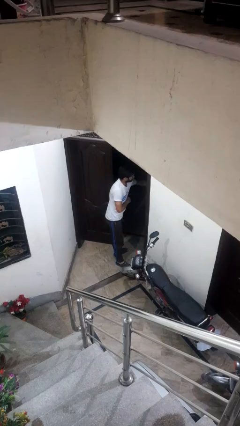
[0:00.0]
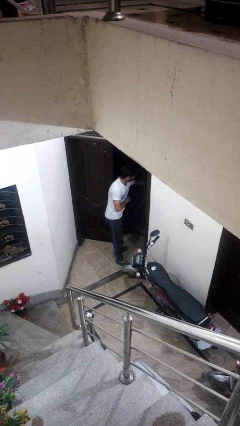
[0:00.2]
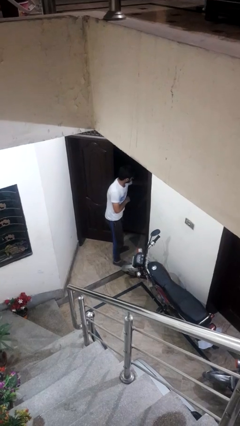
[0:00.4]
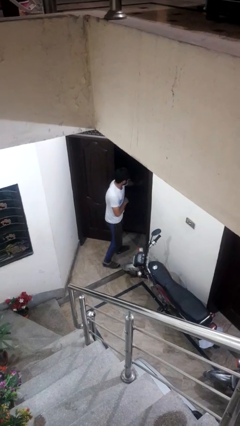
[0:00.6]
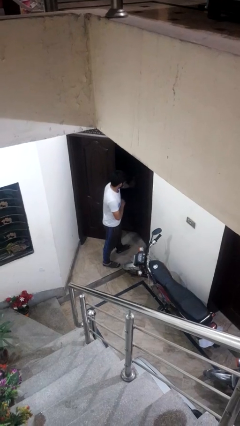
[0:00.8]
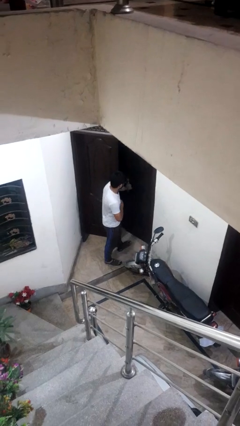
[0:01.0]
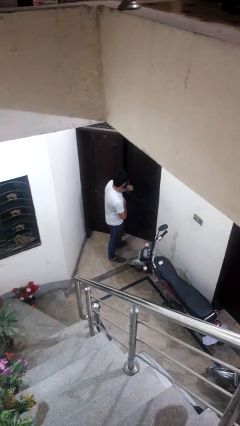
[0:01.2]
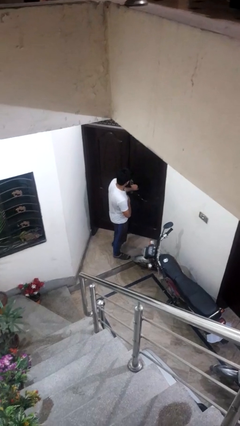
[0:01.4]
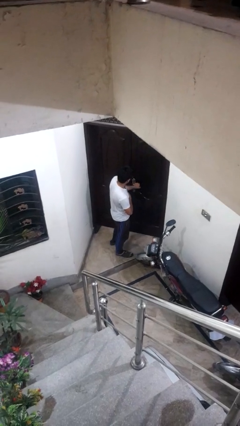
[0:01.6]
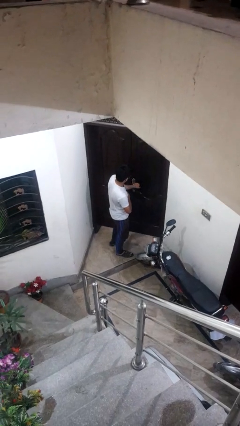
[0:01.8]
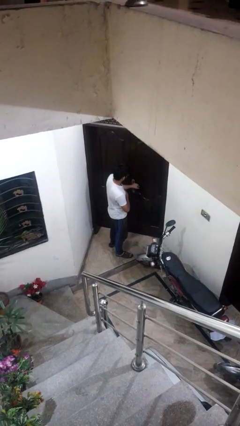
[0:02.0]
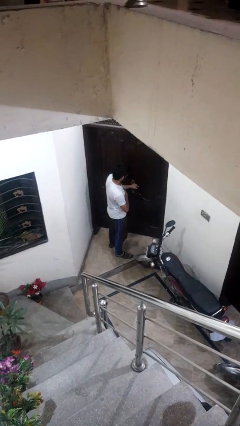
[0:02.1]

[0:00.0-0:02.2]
person closes facility door

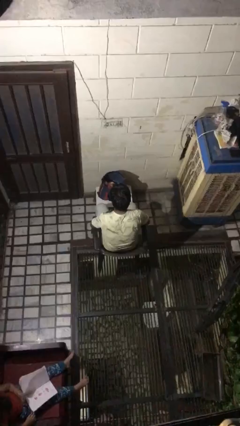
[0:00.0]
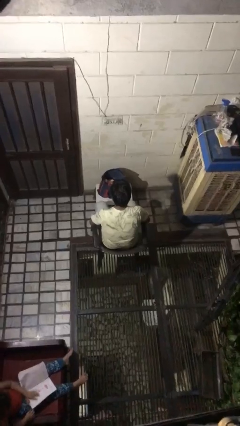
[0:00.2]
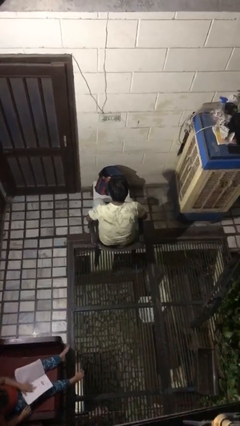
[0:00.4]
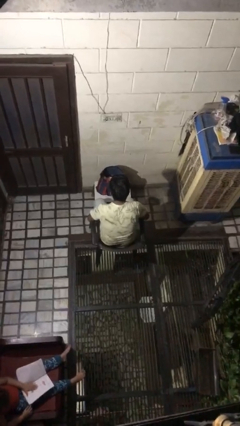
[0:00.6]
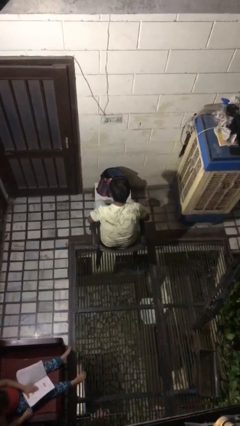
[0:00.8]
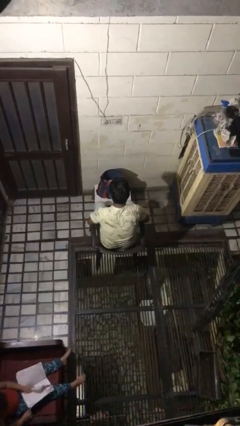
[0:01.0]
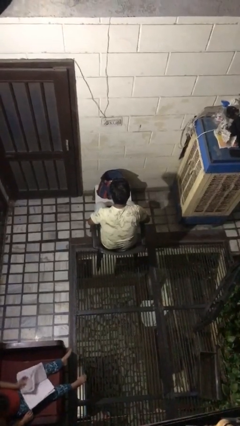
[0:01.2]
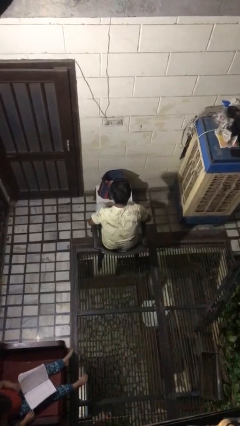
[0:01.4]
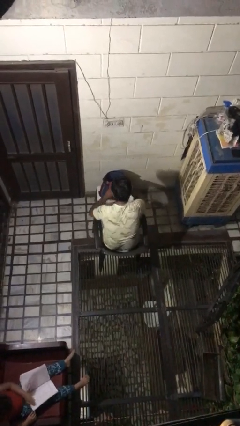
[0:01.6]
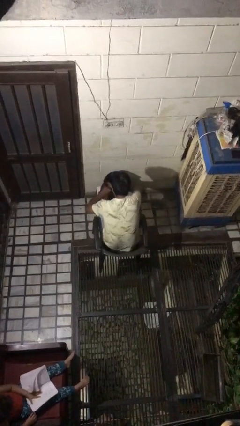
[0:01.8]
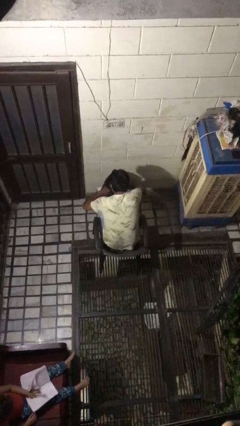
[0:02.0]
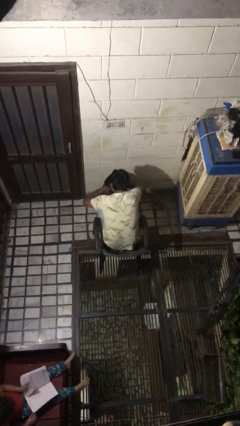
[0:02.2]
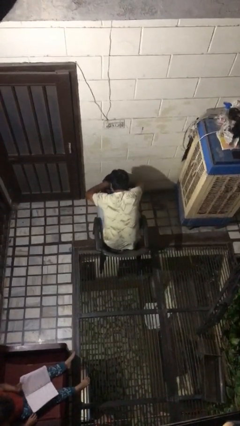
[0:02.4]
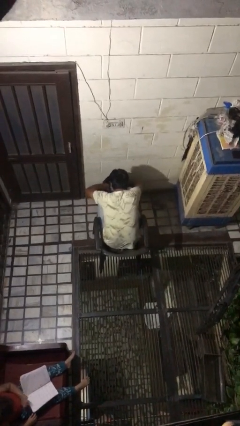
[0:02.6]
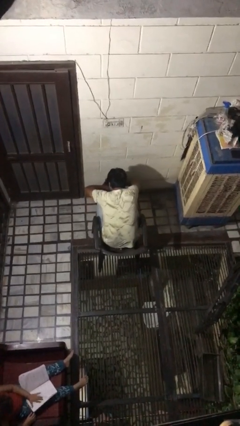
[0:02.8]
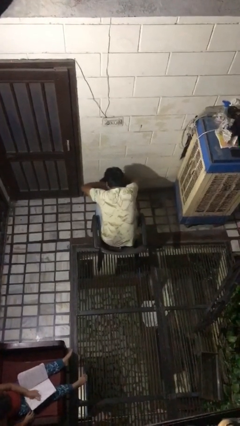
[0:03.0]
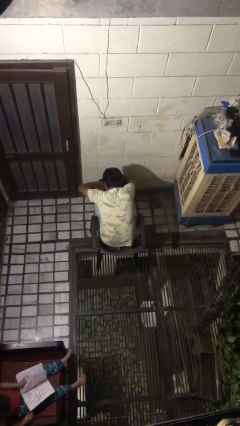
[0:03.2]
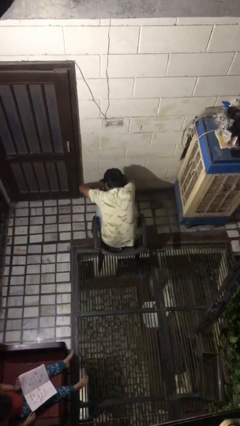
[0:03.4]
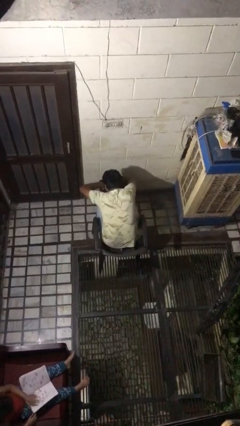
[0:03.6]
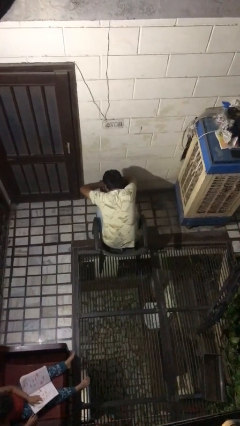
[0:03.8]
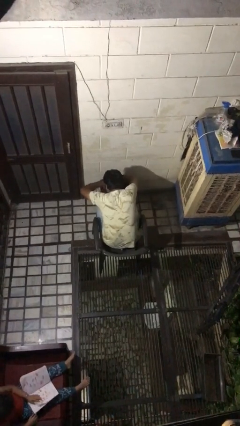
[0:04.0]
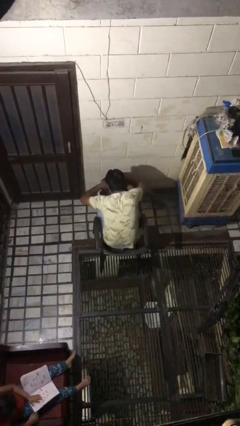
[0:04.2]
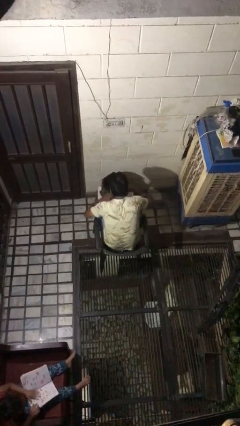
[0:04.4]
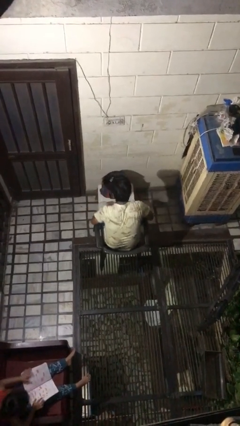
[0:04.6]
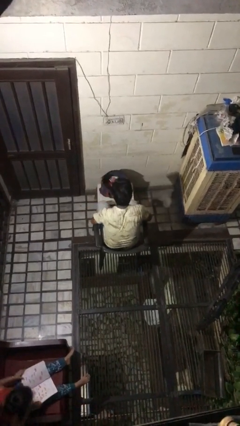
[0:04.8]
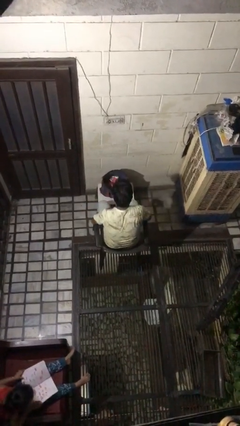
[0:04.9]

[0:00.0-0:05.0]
person searches in bag

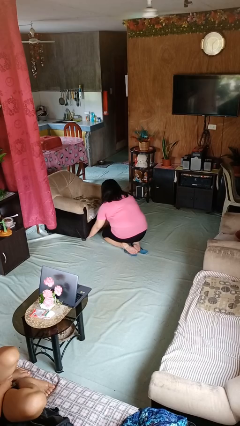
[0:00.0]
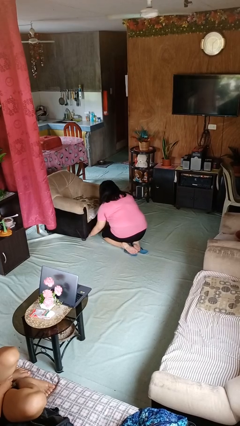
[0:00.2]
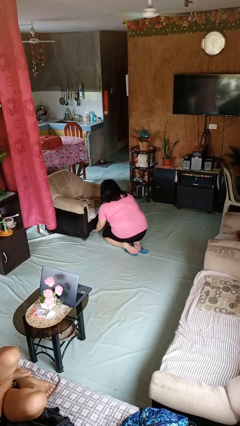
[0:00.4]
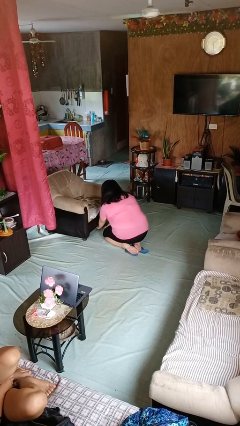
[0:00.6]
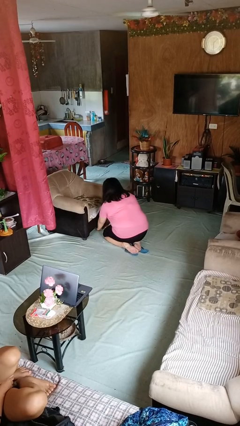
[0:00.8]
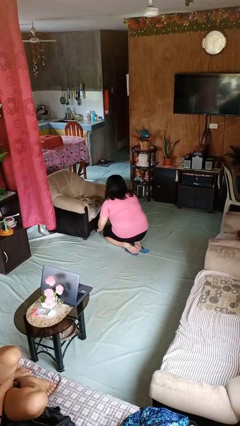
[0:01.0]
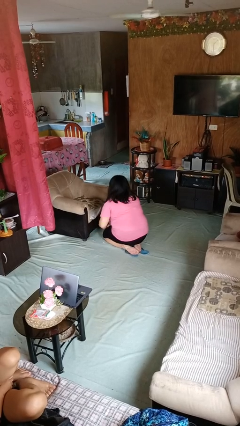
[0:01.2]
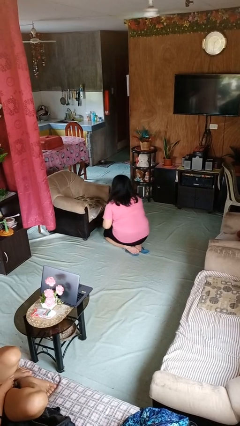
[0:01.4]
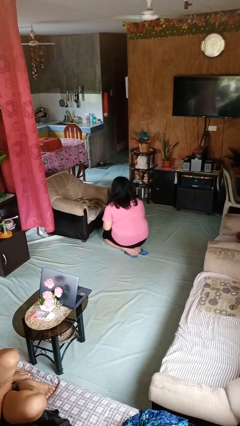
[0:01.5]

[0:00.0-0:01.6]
person searches under couch

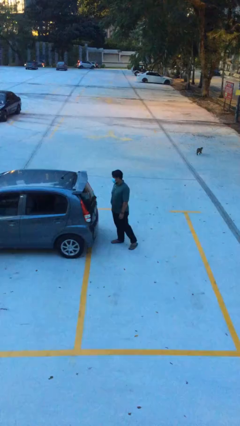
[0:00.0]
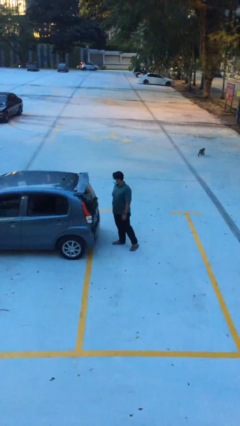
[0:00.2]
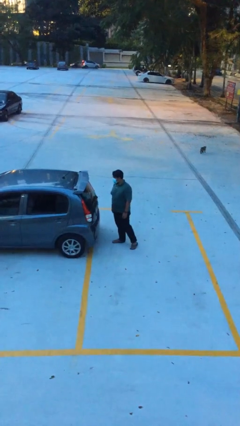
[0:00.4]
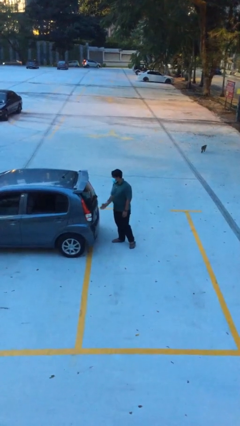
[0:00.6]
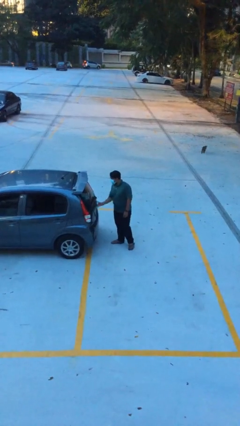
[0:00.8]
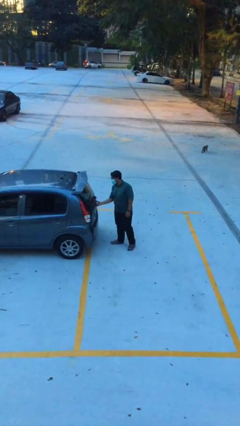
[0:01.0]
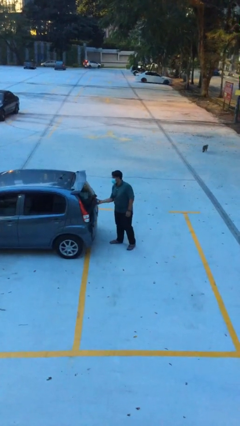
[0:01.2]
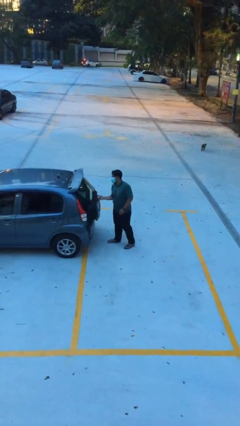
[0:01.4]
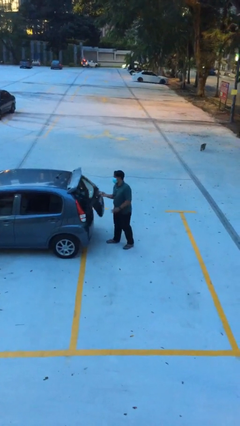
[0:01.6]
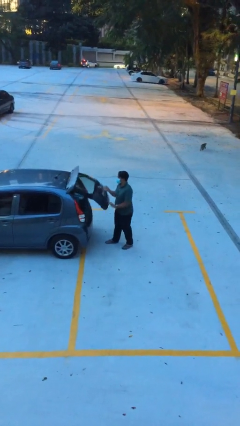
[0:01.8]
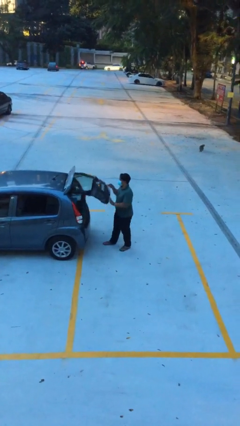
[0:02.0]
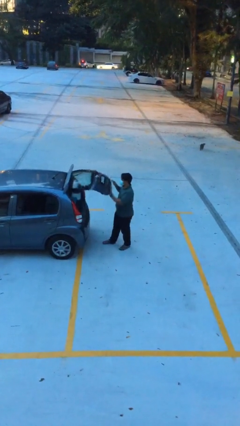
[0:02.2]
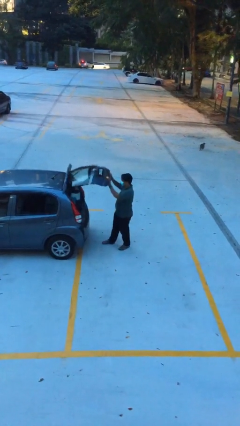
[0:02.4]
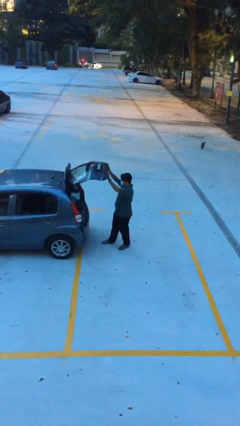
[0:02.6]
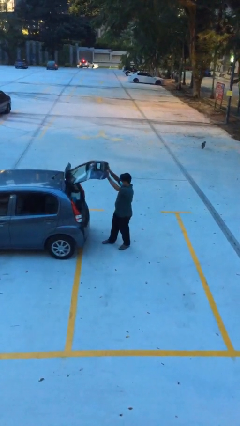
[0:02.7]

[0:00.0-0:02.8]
person opens car trunk

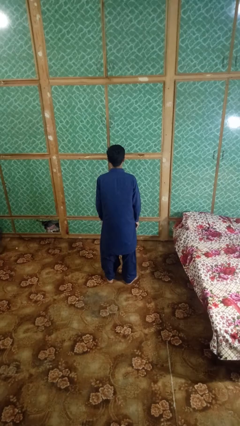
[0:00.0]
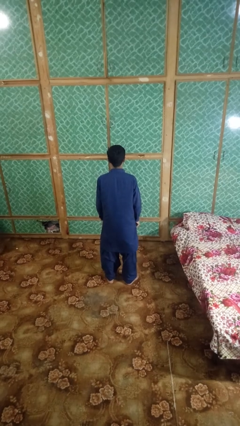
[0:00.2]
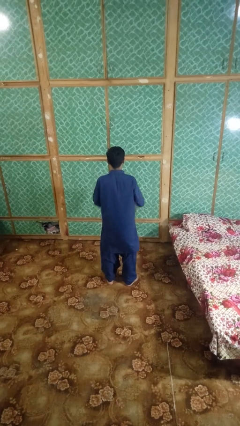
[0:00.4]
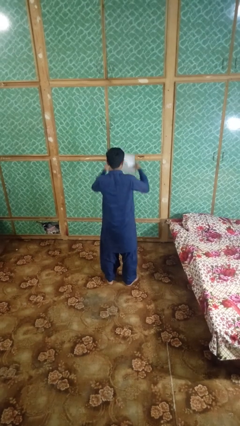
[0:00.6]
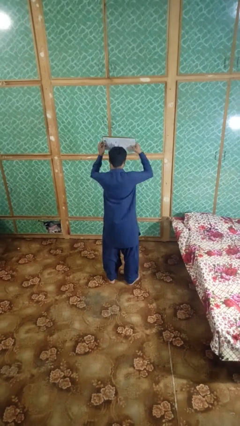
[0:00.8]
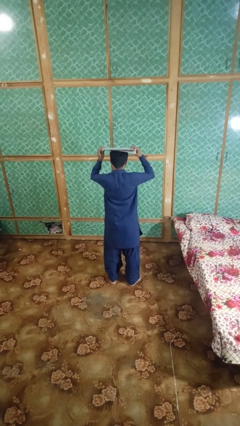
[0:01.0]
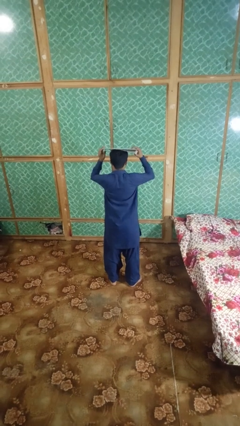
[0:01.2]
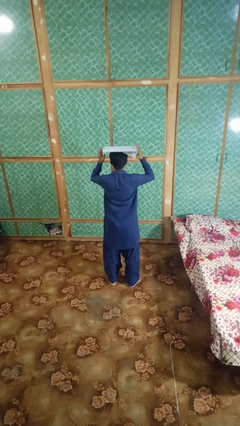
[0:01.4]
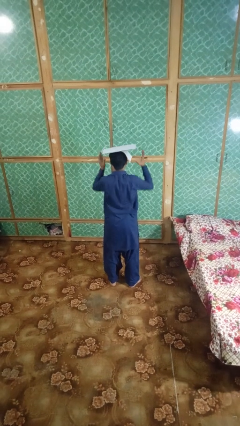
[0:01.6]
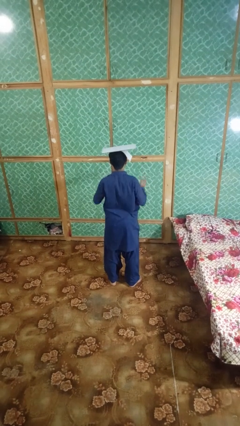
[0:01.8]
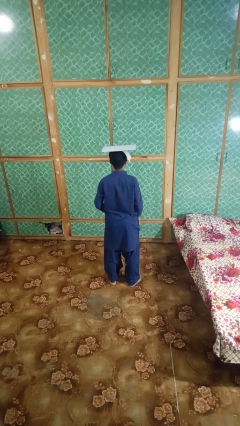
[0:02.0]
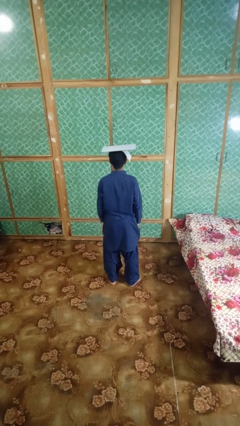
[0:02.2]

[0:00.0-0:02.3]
person holds object above head

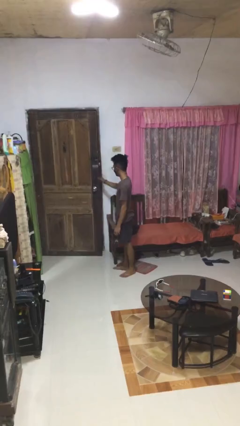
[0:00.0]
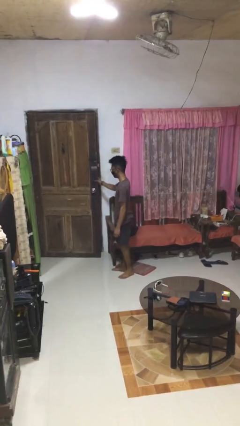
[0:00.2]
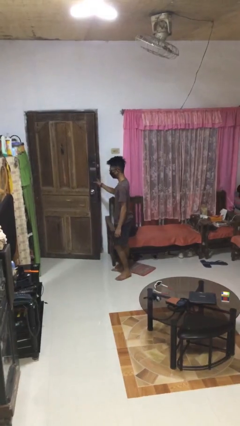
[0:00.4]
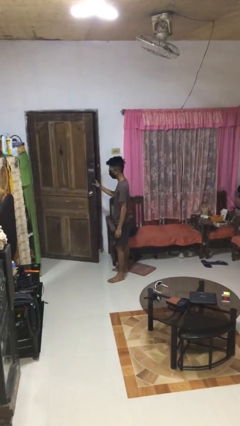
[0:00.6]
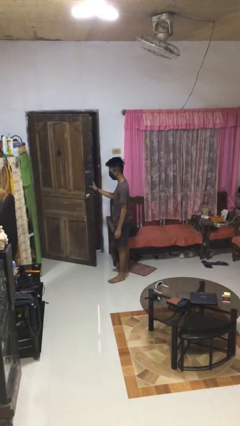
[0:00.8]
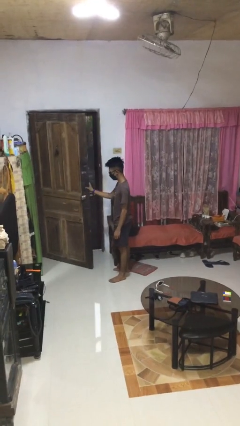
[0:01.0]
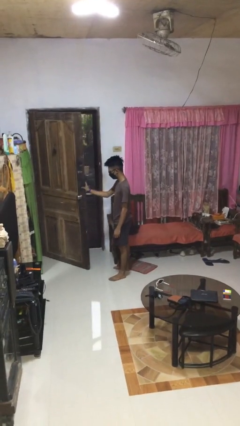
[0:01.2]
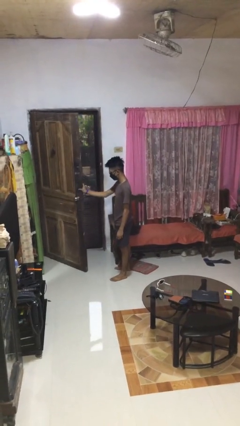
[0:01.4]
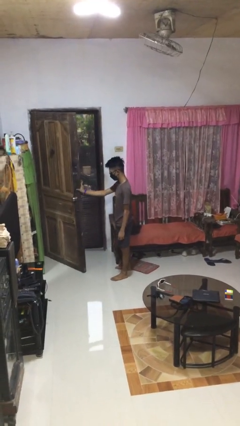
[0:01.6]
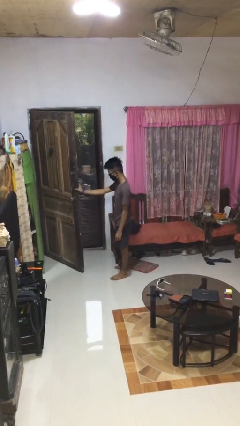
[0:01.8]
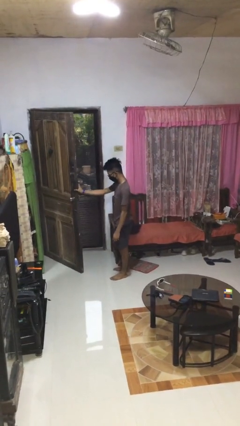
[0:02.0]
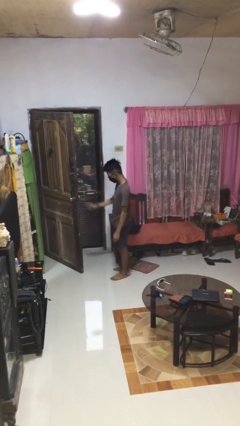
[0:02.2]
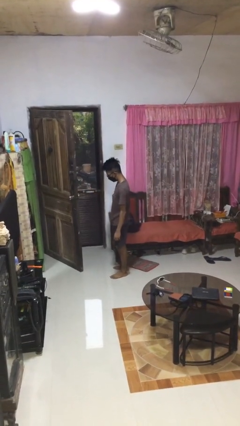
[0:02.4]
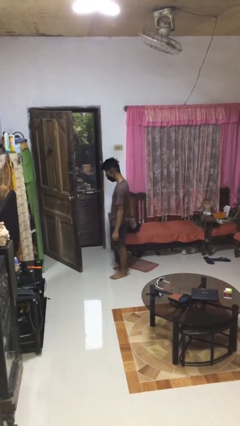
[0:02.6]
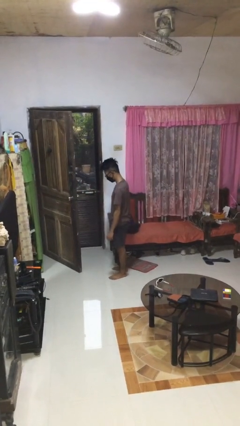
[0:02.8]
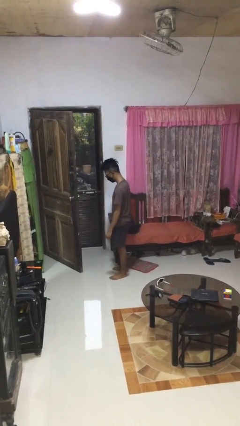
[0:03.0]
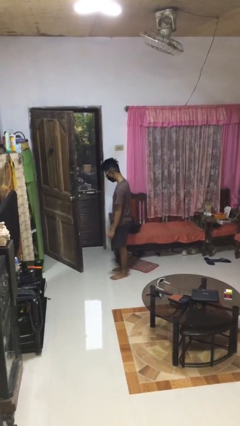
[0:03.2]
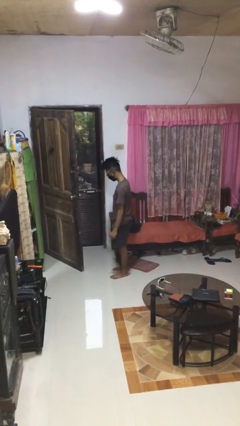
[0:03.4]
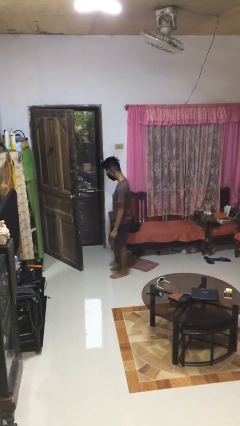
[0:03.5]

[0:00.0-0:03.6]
person opens facility door
